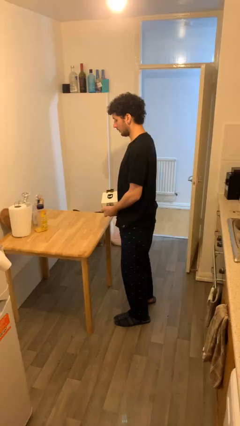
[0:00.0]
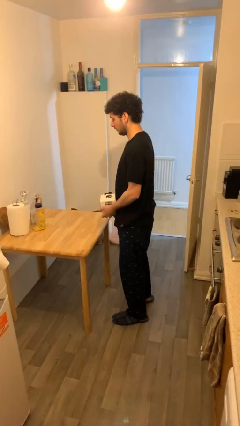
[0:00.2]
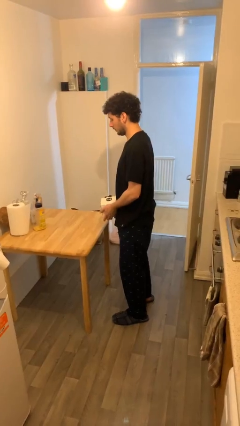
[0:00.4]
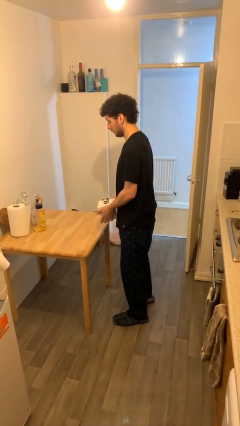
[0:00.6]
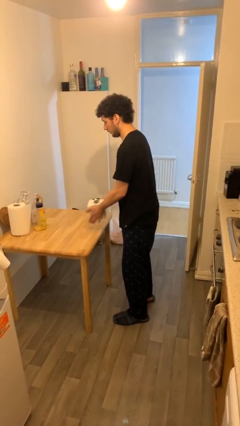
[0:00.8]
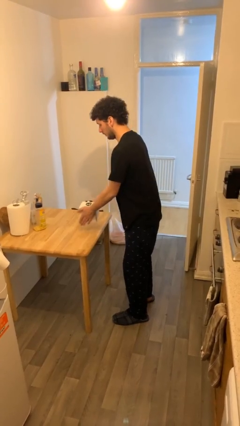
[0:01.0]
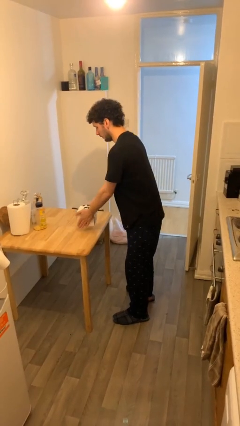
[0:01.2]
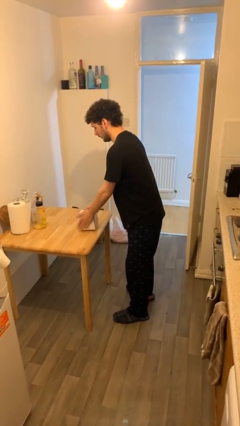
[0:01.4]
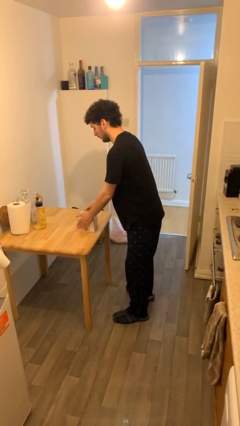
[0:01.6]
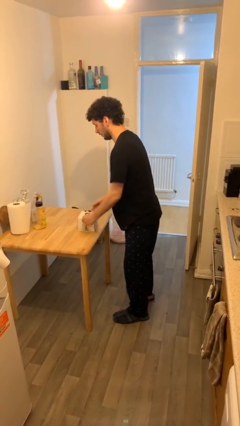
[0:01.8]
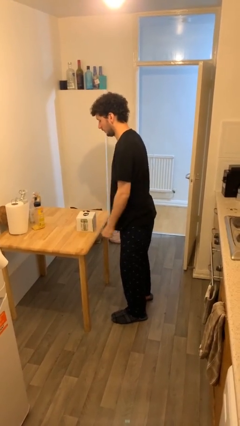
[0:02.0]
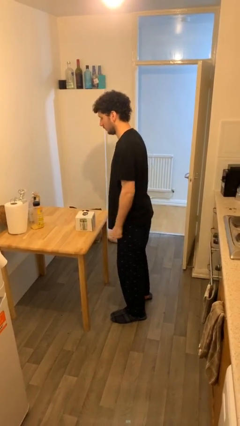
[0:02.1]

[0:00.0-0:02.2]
person puts down object on table

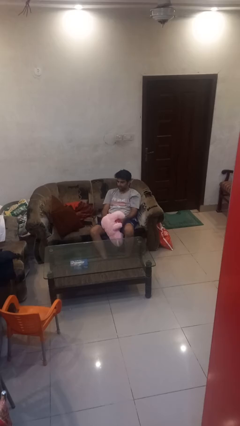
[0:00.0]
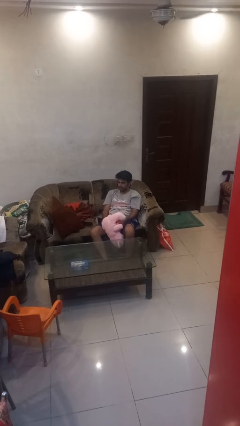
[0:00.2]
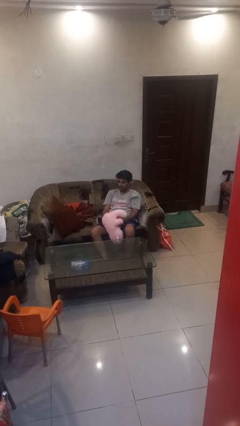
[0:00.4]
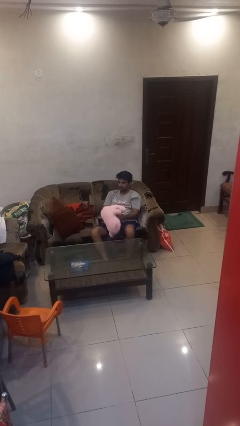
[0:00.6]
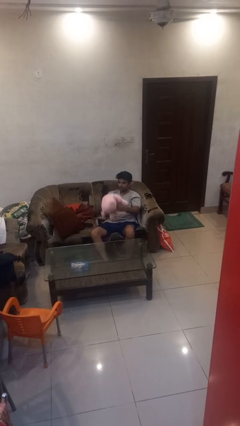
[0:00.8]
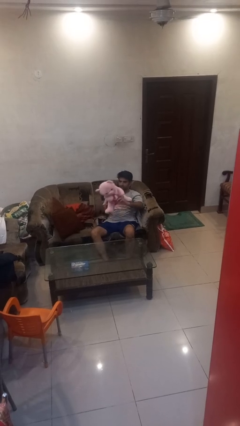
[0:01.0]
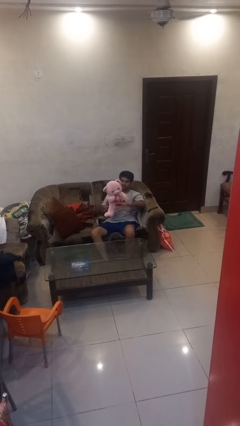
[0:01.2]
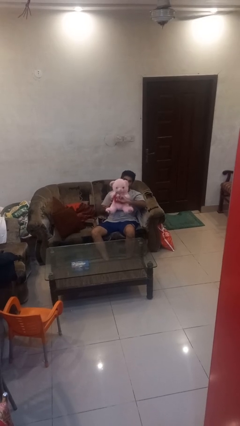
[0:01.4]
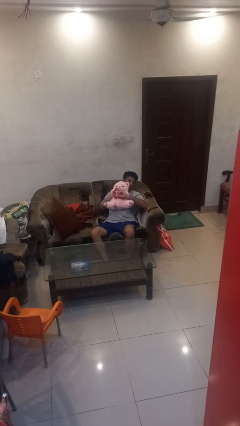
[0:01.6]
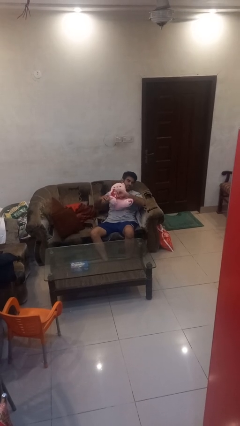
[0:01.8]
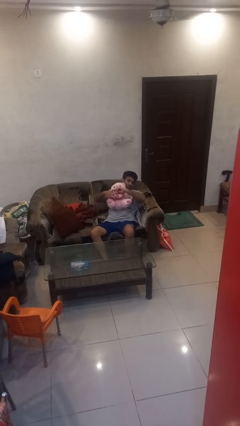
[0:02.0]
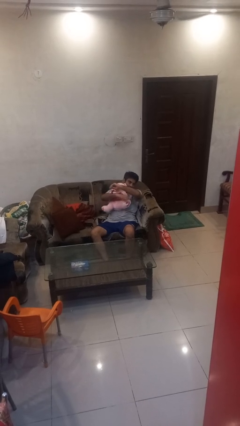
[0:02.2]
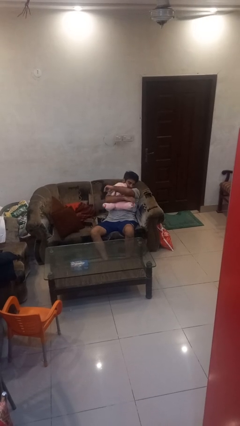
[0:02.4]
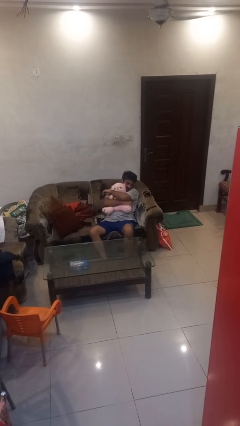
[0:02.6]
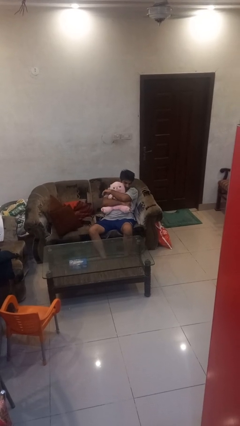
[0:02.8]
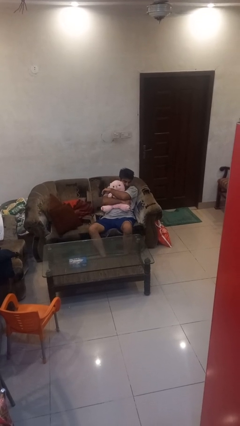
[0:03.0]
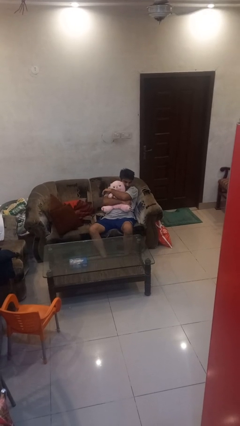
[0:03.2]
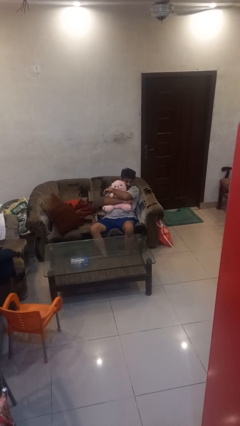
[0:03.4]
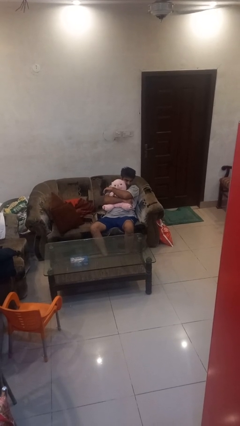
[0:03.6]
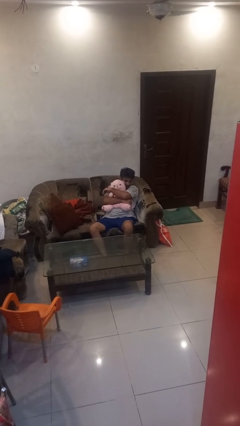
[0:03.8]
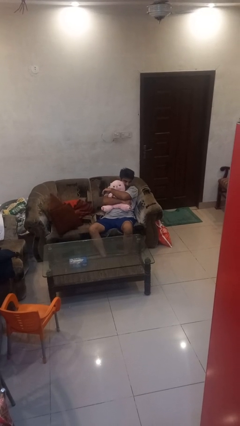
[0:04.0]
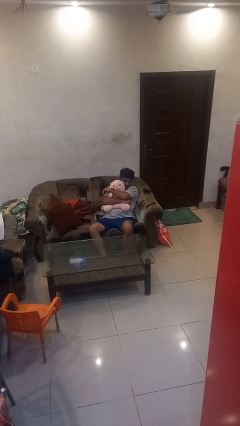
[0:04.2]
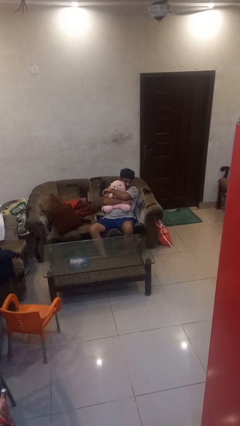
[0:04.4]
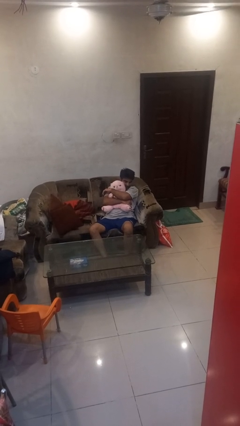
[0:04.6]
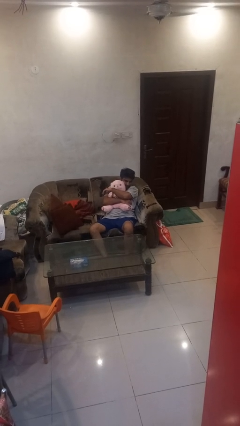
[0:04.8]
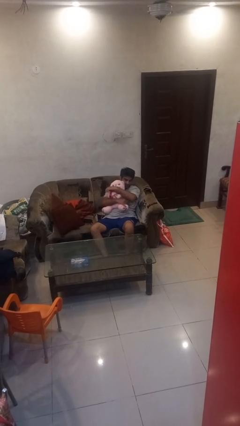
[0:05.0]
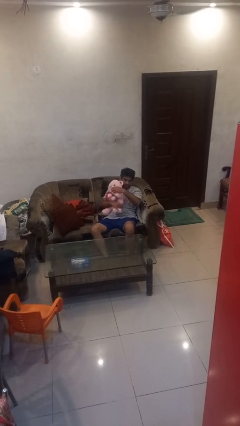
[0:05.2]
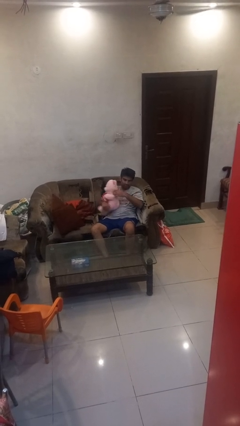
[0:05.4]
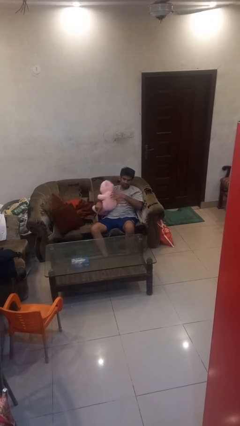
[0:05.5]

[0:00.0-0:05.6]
person hugs stuffed animal

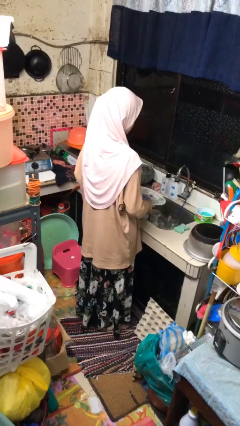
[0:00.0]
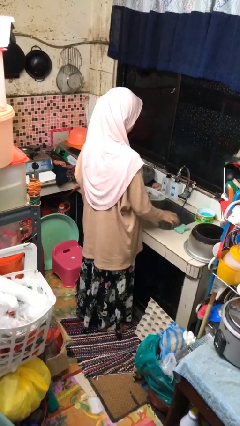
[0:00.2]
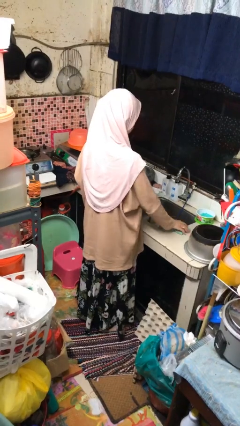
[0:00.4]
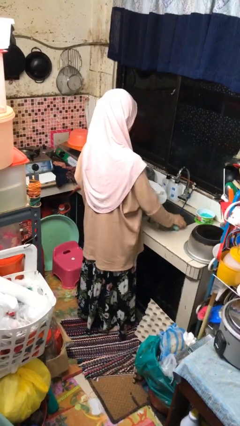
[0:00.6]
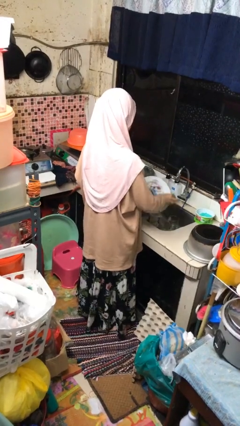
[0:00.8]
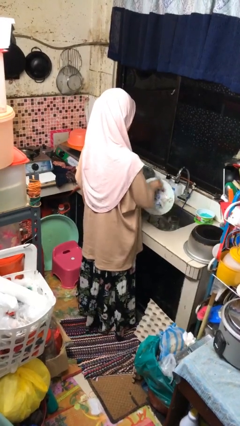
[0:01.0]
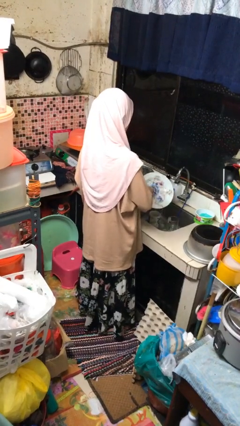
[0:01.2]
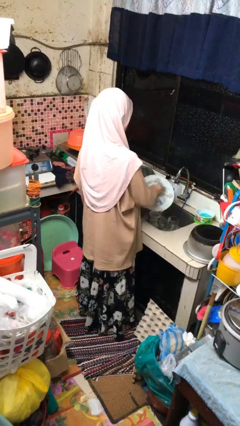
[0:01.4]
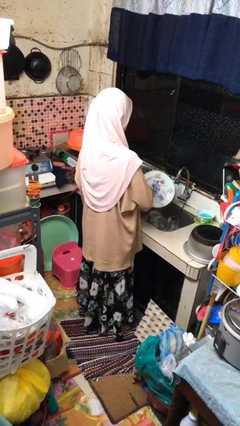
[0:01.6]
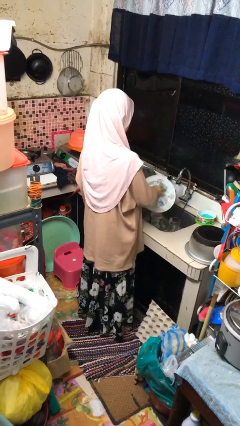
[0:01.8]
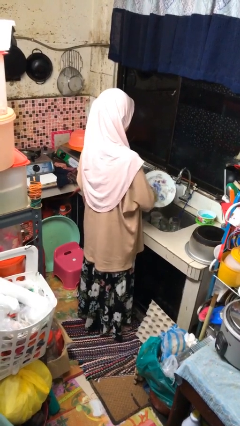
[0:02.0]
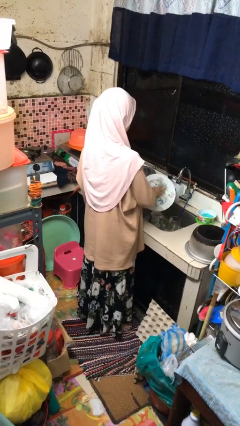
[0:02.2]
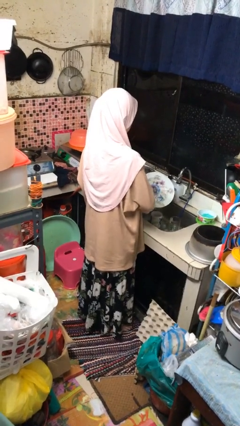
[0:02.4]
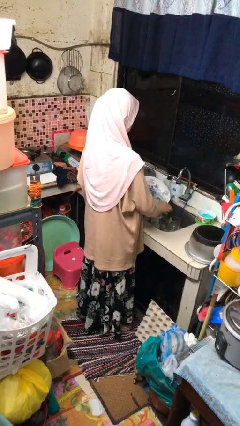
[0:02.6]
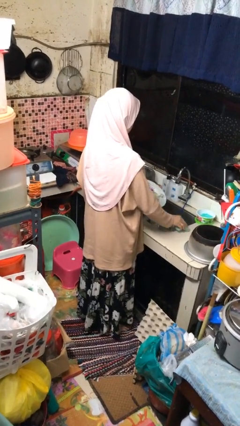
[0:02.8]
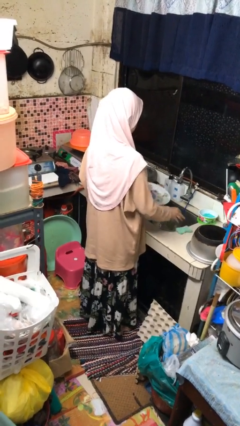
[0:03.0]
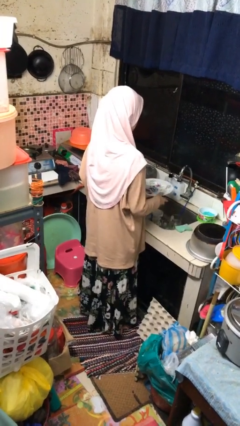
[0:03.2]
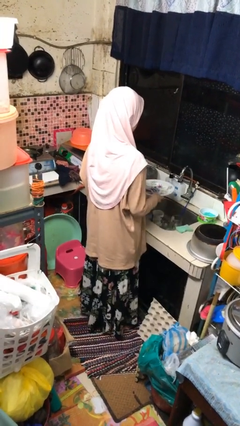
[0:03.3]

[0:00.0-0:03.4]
person washes dish

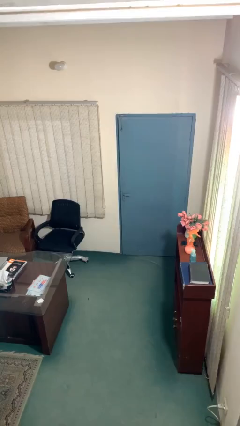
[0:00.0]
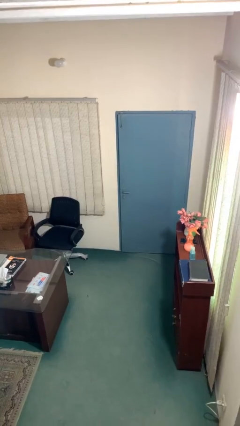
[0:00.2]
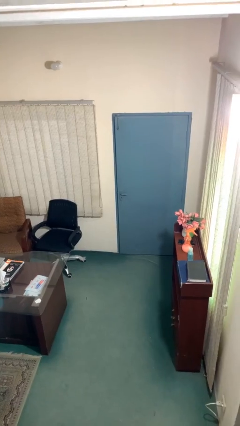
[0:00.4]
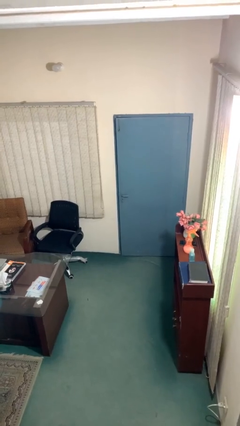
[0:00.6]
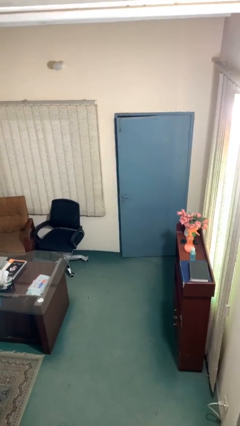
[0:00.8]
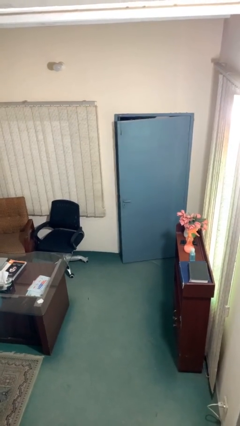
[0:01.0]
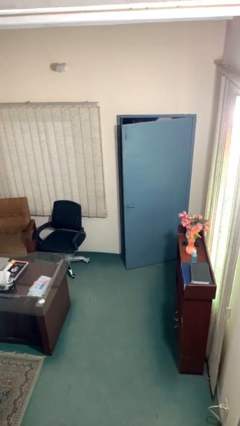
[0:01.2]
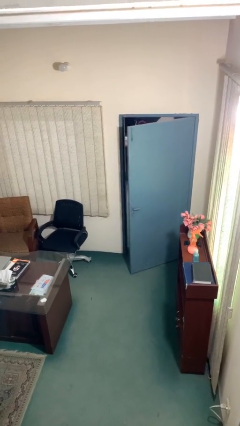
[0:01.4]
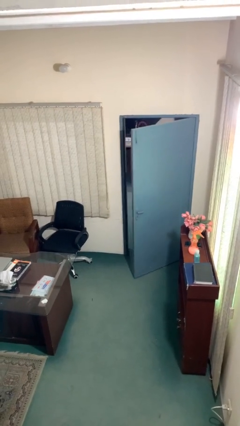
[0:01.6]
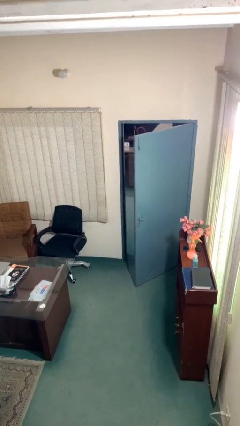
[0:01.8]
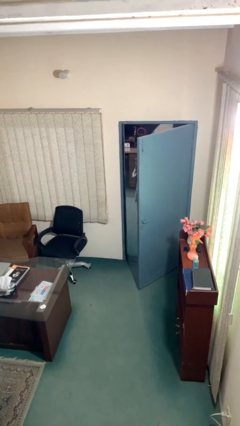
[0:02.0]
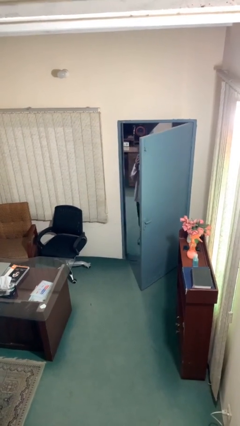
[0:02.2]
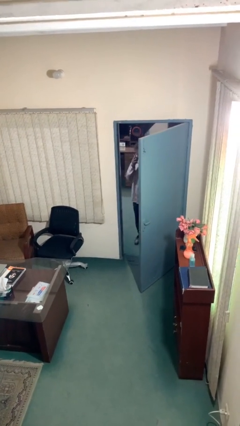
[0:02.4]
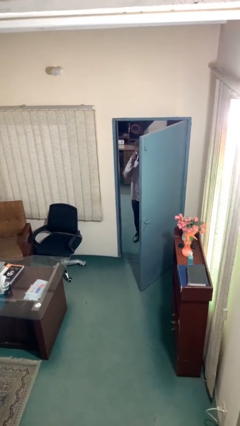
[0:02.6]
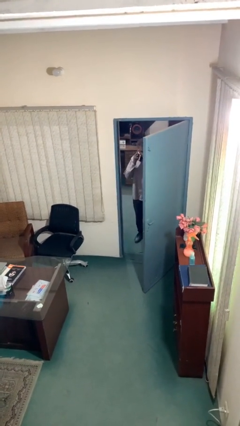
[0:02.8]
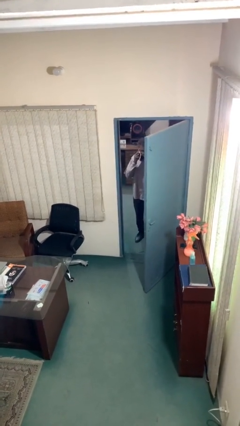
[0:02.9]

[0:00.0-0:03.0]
person opens facility door

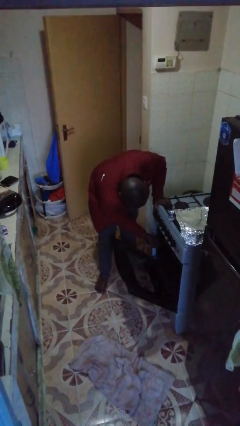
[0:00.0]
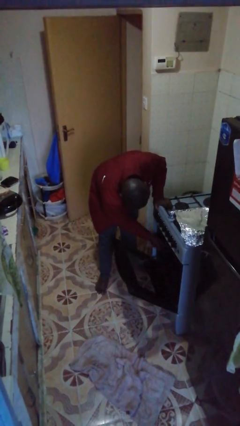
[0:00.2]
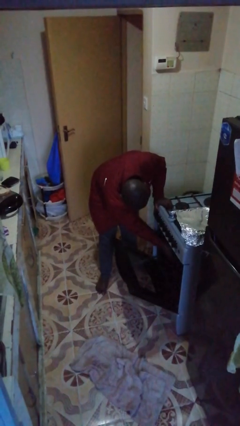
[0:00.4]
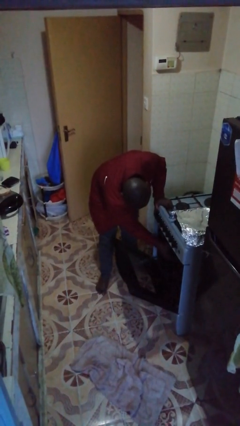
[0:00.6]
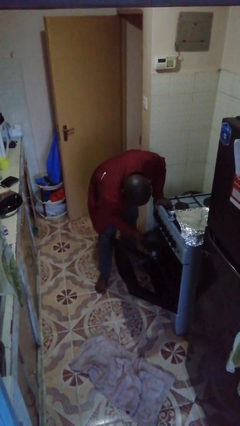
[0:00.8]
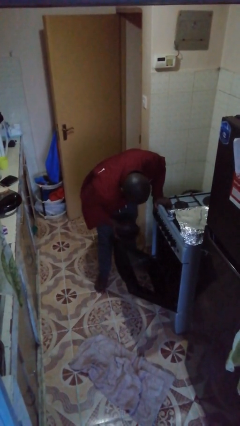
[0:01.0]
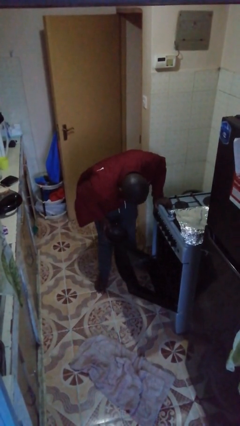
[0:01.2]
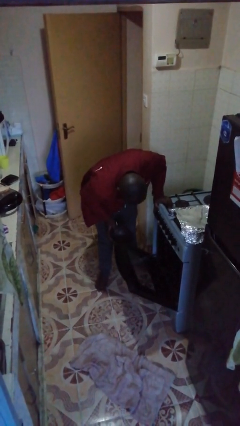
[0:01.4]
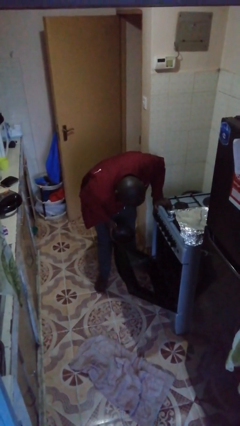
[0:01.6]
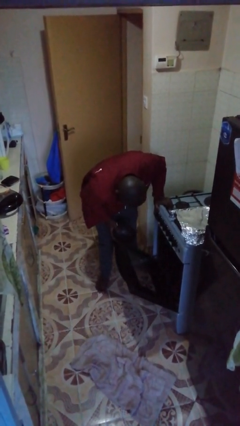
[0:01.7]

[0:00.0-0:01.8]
person takes object from oven

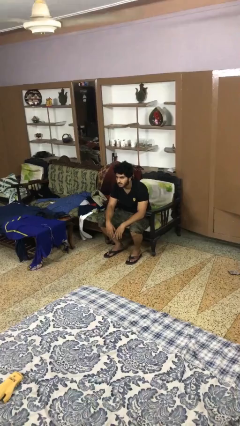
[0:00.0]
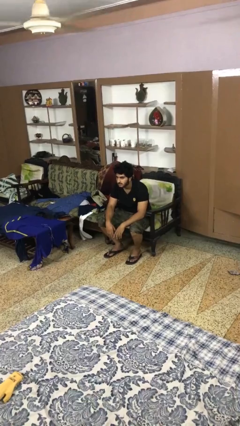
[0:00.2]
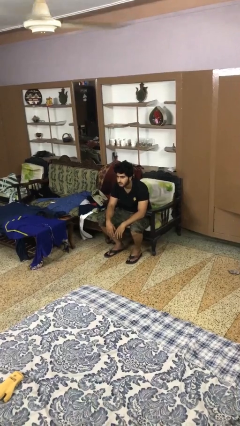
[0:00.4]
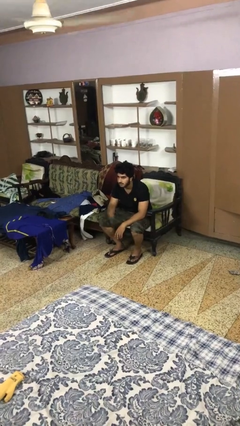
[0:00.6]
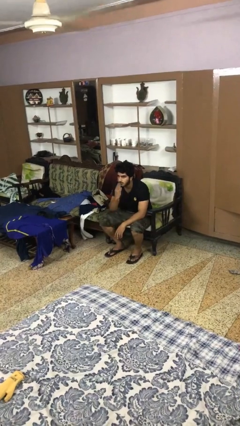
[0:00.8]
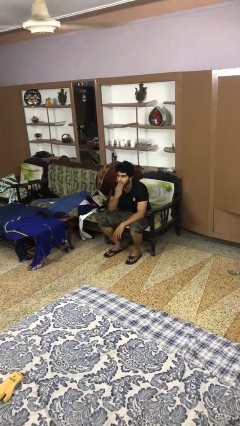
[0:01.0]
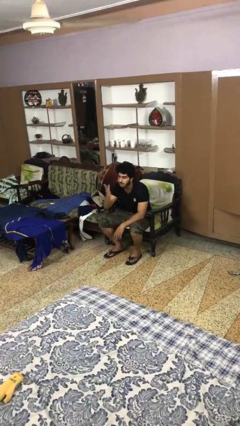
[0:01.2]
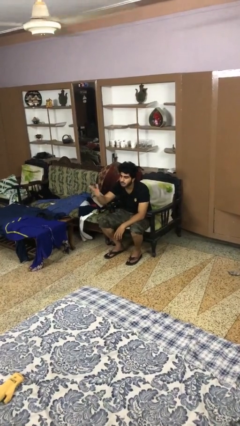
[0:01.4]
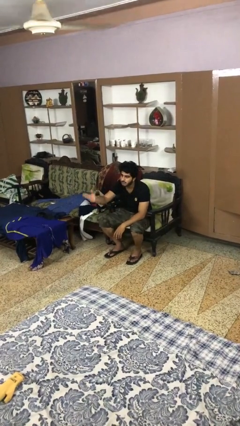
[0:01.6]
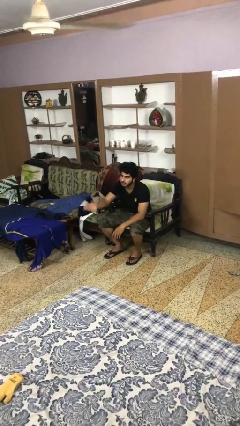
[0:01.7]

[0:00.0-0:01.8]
person gestures blow kiss
